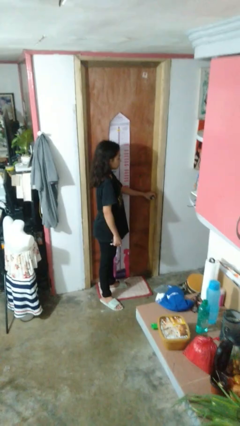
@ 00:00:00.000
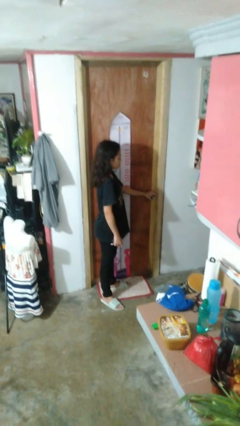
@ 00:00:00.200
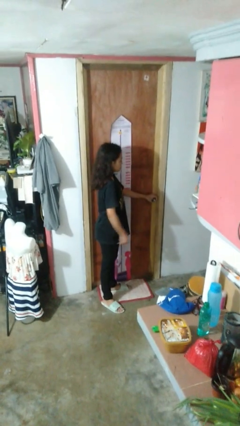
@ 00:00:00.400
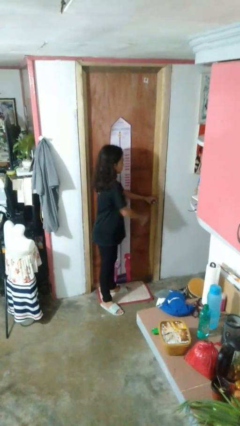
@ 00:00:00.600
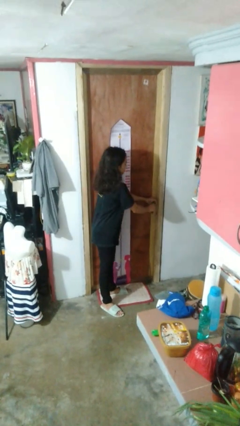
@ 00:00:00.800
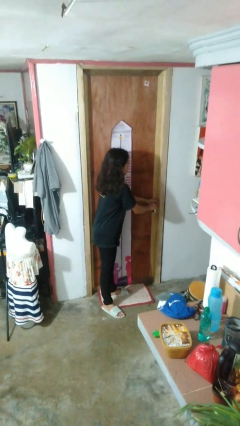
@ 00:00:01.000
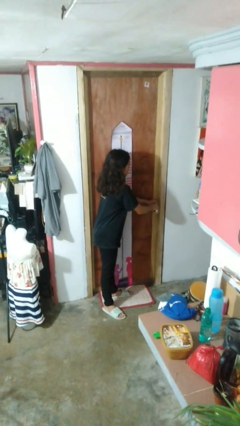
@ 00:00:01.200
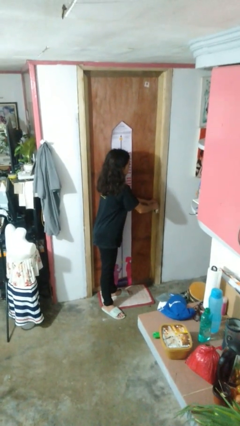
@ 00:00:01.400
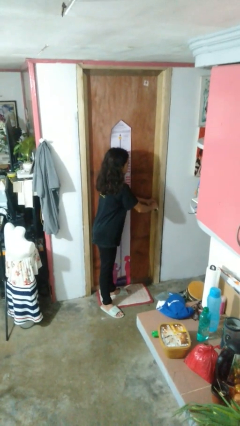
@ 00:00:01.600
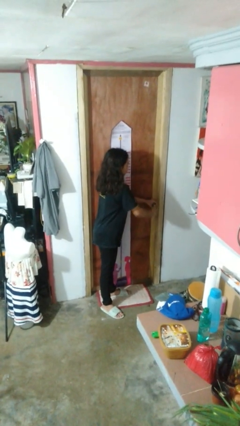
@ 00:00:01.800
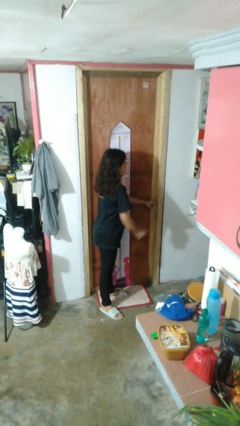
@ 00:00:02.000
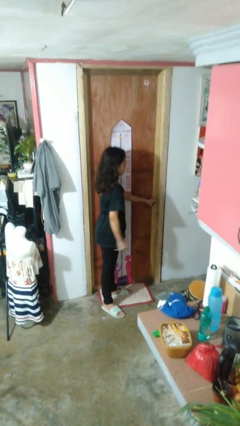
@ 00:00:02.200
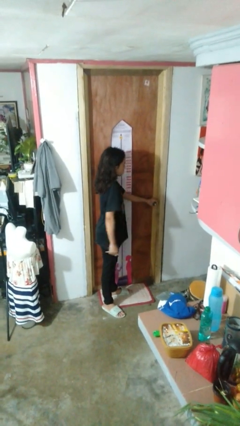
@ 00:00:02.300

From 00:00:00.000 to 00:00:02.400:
person locks door with keys

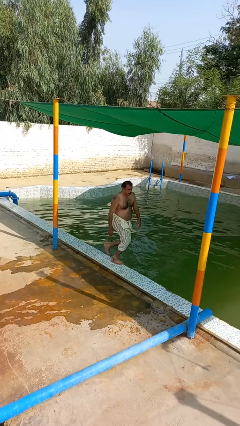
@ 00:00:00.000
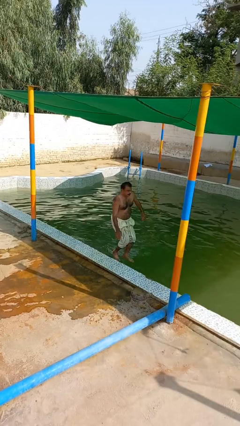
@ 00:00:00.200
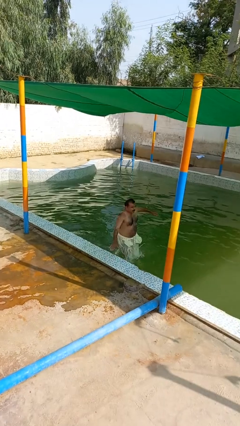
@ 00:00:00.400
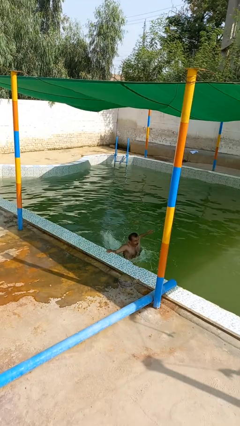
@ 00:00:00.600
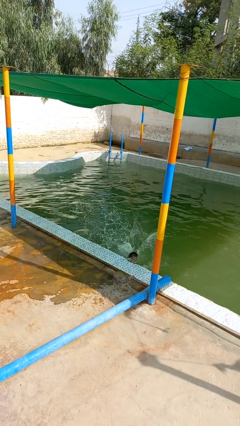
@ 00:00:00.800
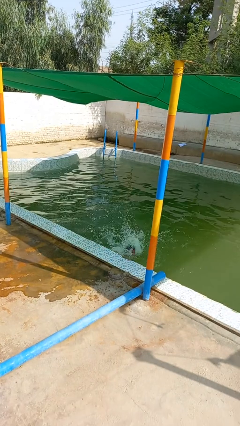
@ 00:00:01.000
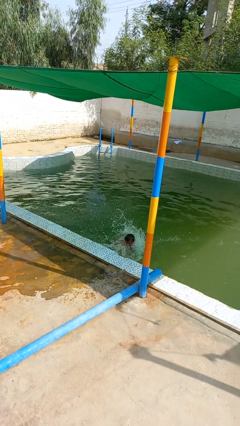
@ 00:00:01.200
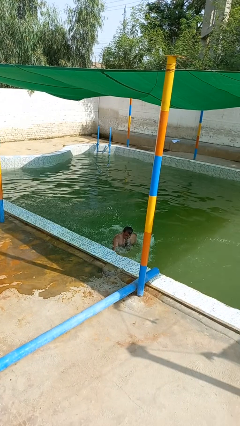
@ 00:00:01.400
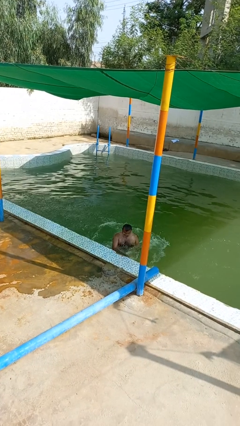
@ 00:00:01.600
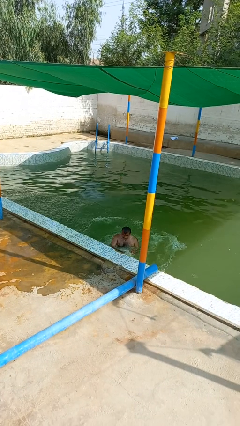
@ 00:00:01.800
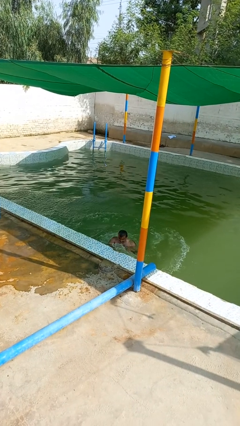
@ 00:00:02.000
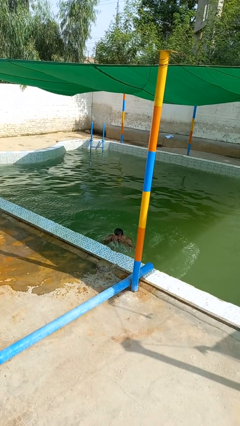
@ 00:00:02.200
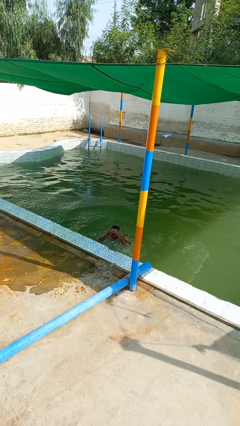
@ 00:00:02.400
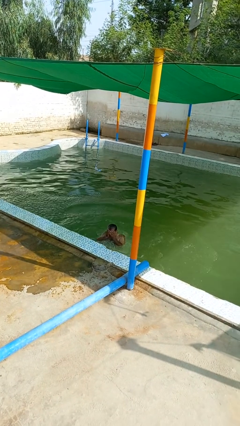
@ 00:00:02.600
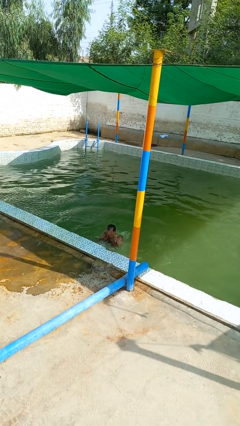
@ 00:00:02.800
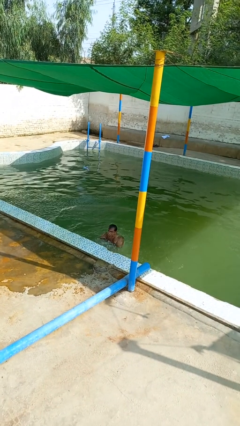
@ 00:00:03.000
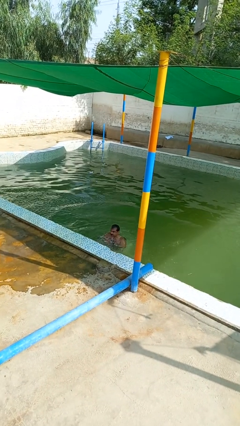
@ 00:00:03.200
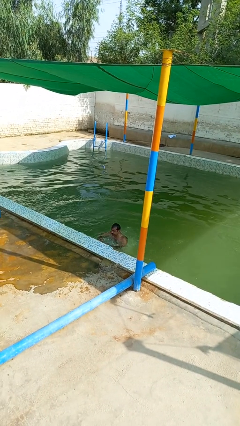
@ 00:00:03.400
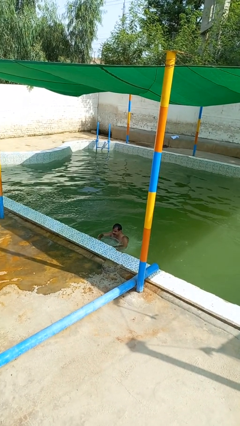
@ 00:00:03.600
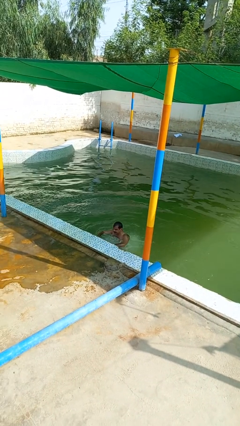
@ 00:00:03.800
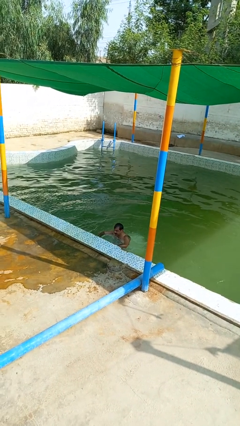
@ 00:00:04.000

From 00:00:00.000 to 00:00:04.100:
person falls into pool

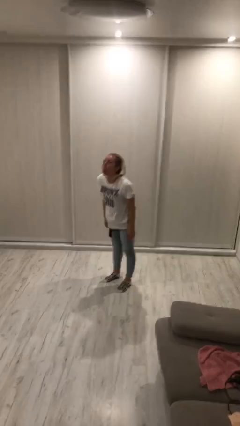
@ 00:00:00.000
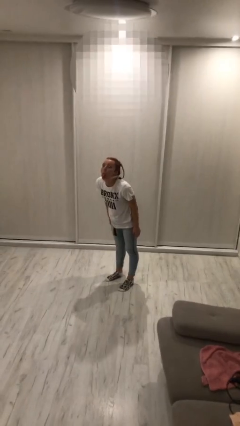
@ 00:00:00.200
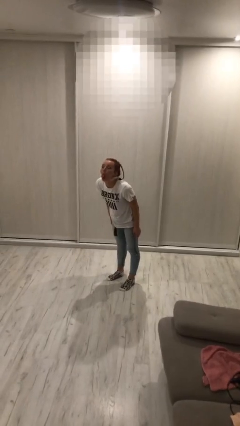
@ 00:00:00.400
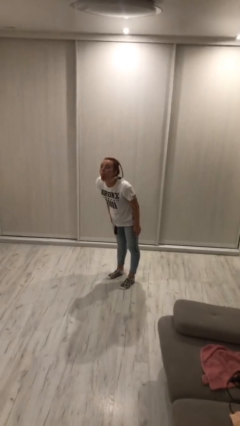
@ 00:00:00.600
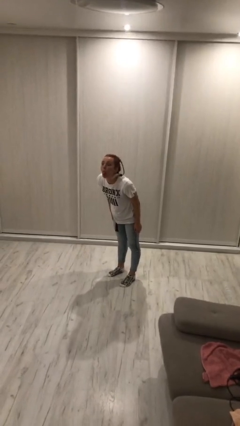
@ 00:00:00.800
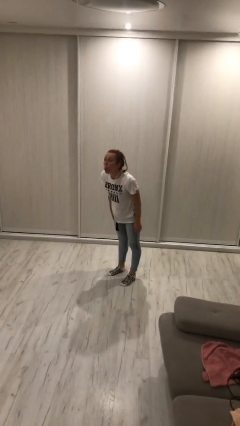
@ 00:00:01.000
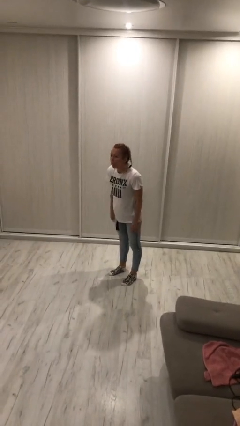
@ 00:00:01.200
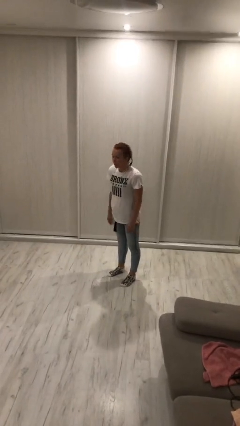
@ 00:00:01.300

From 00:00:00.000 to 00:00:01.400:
person sticks out tongue

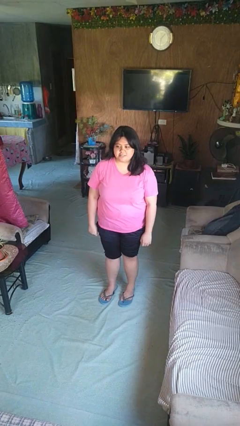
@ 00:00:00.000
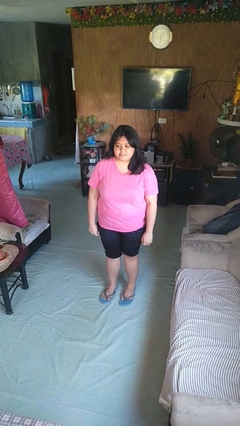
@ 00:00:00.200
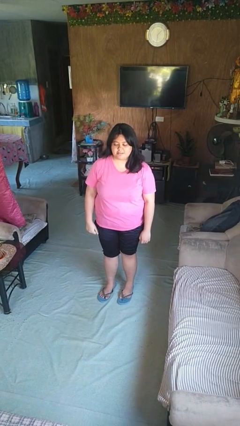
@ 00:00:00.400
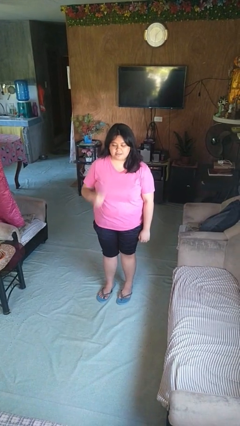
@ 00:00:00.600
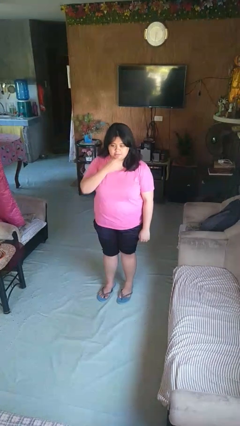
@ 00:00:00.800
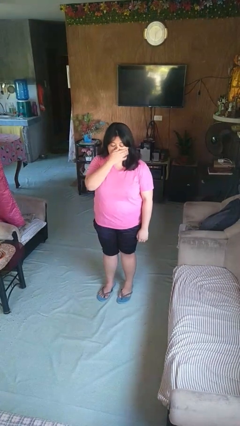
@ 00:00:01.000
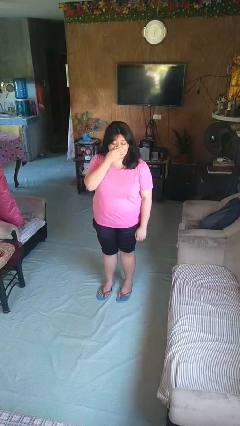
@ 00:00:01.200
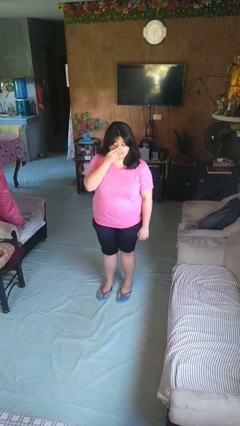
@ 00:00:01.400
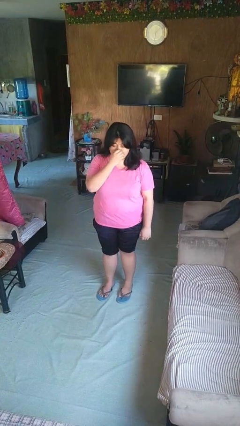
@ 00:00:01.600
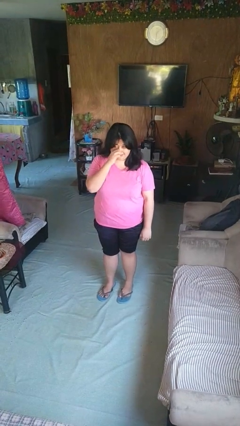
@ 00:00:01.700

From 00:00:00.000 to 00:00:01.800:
person scratches face

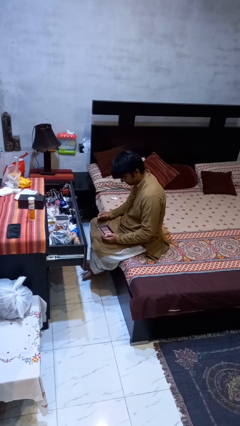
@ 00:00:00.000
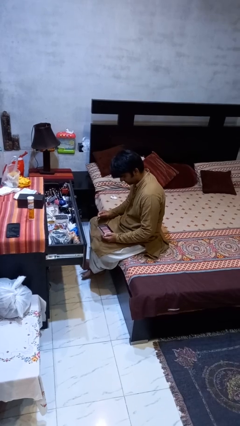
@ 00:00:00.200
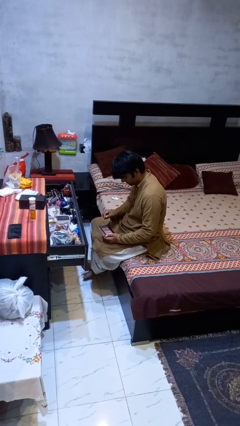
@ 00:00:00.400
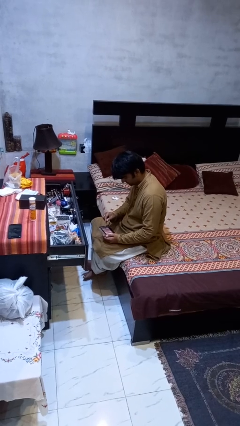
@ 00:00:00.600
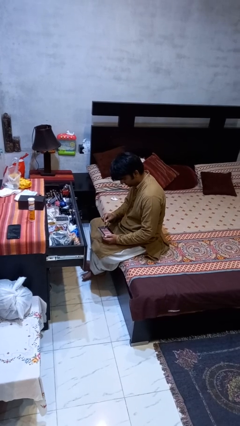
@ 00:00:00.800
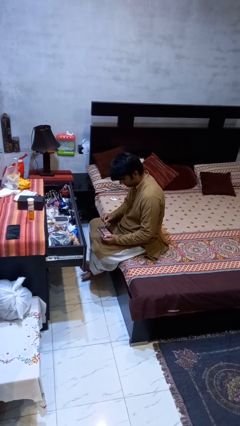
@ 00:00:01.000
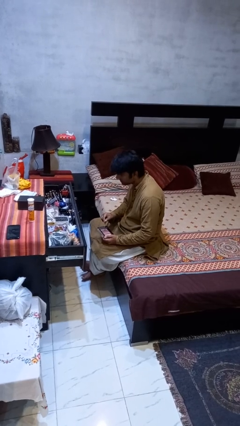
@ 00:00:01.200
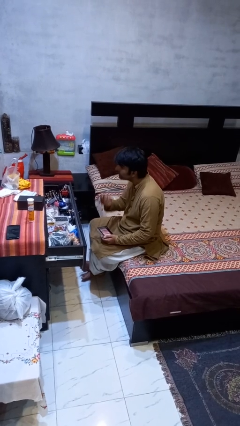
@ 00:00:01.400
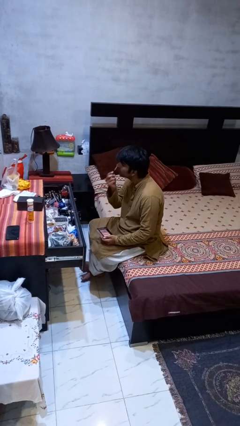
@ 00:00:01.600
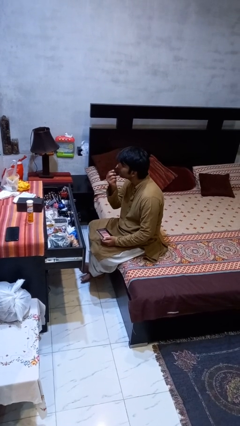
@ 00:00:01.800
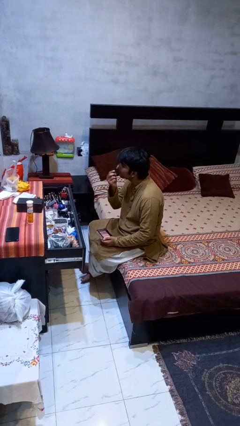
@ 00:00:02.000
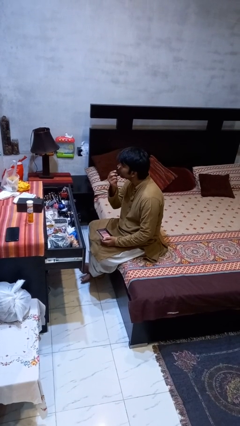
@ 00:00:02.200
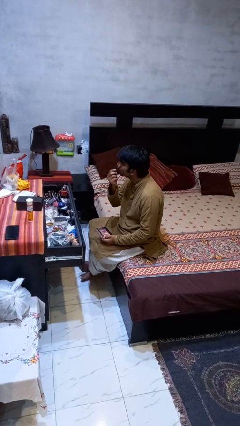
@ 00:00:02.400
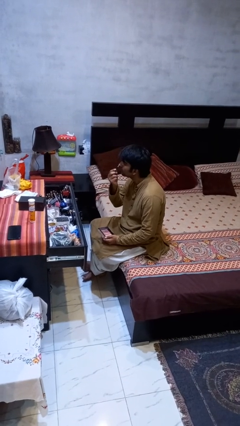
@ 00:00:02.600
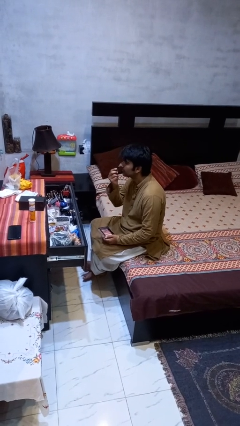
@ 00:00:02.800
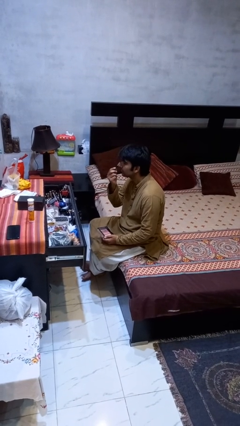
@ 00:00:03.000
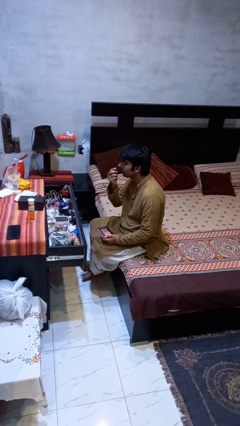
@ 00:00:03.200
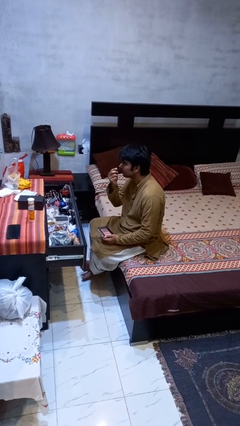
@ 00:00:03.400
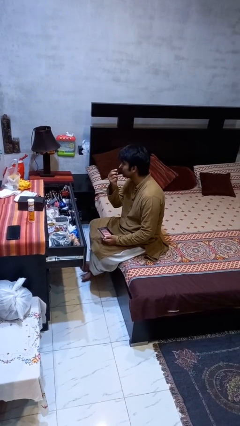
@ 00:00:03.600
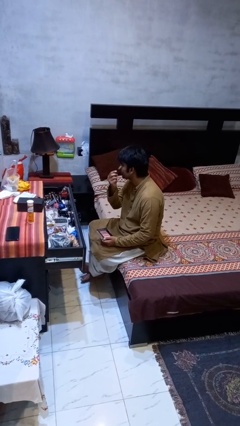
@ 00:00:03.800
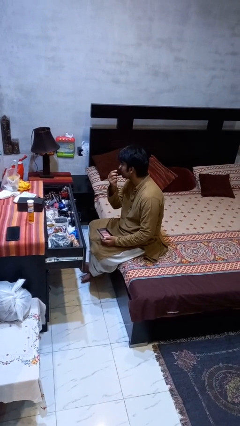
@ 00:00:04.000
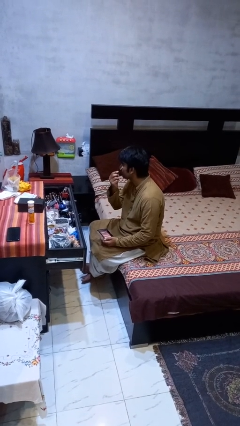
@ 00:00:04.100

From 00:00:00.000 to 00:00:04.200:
person applies eye makeup

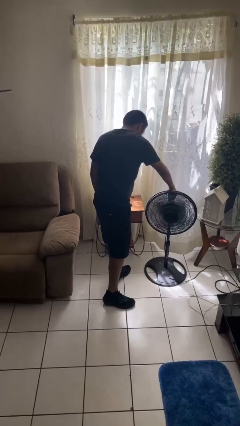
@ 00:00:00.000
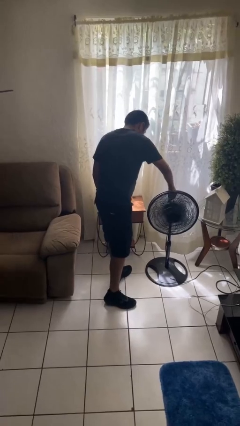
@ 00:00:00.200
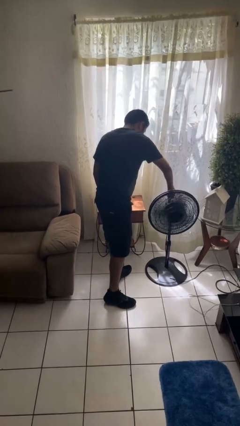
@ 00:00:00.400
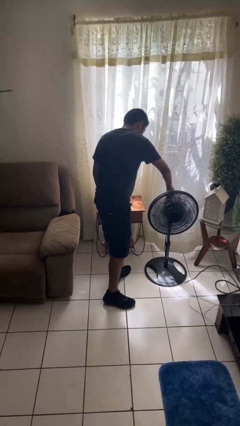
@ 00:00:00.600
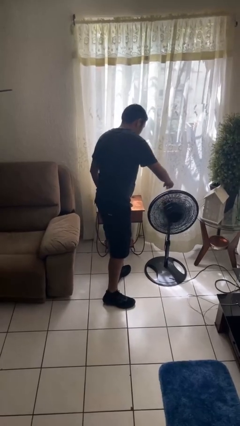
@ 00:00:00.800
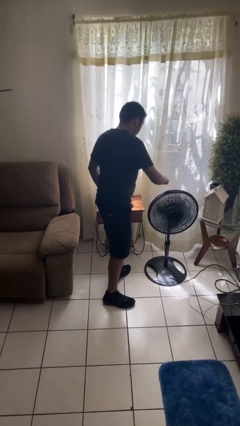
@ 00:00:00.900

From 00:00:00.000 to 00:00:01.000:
person turns off fan

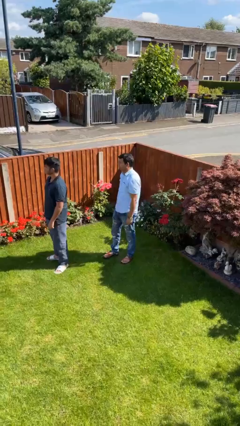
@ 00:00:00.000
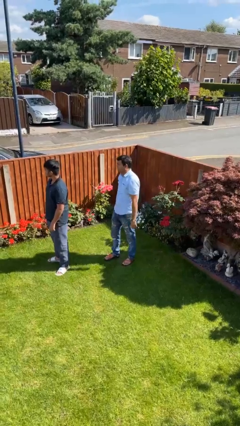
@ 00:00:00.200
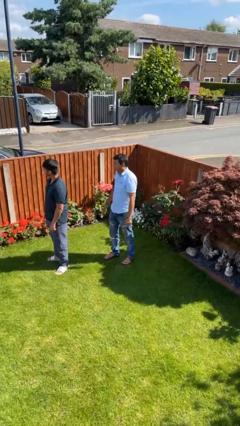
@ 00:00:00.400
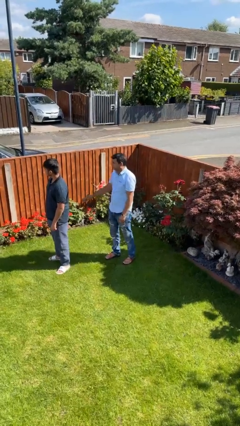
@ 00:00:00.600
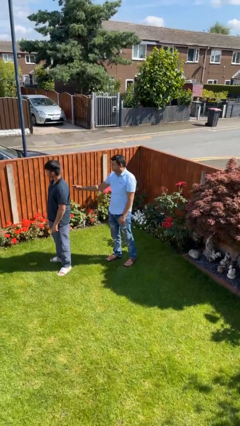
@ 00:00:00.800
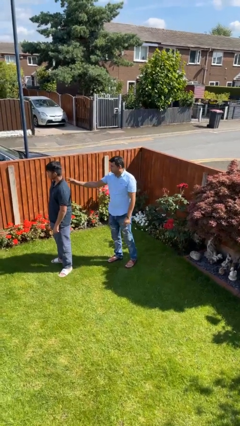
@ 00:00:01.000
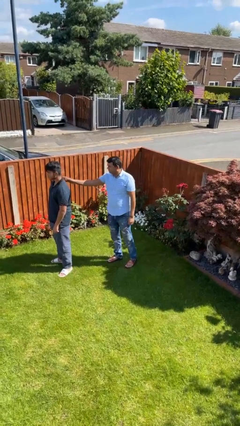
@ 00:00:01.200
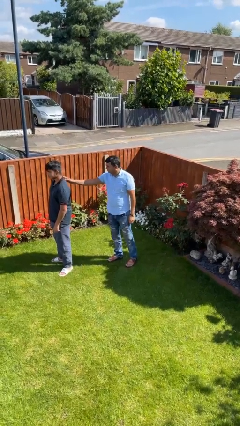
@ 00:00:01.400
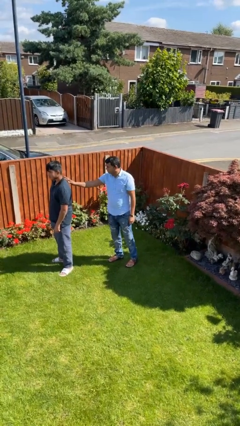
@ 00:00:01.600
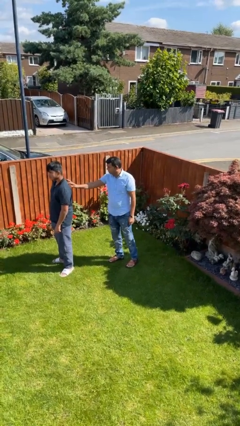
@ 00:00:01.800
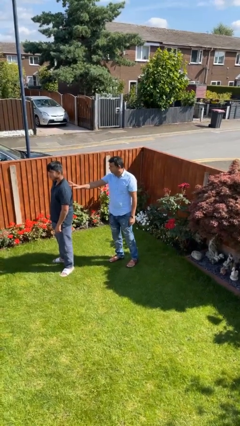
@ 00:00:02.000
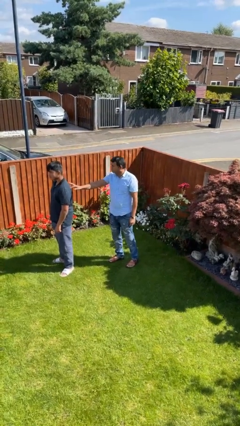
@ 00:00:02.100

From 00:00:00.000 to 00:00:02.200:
person touches back of person
